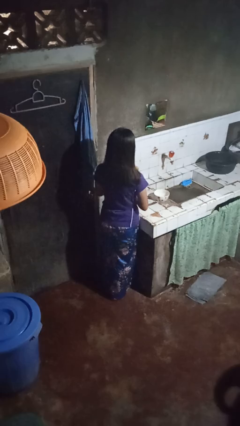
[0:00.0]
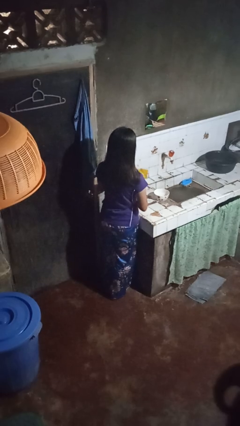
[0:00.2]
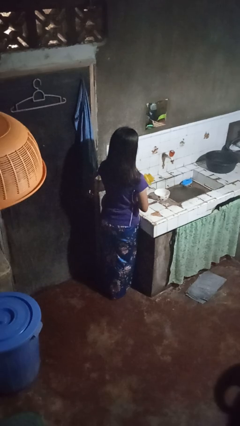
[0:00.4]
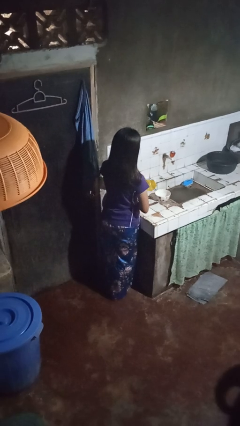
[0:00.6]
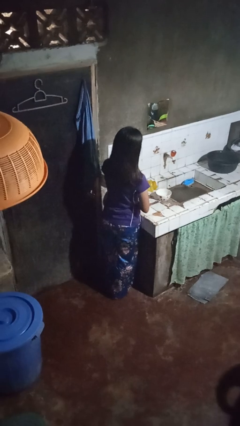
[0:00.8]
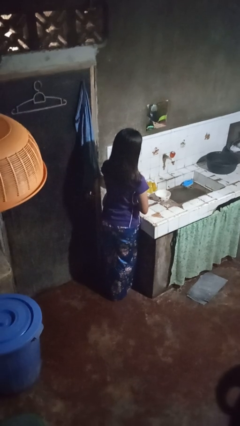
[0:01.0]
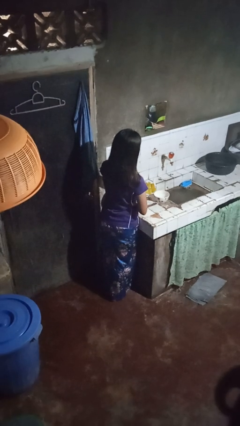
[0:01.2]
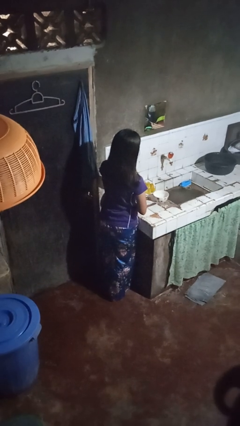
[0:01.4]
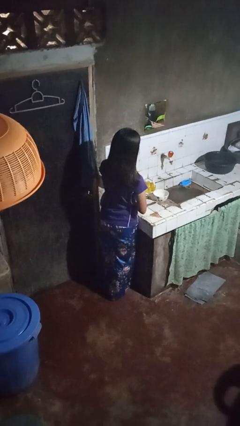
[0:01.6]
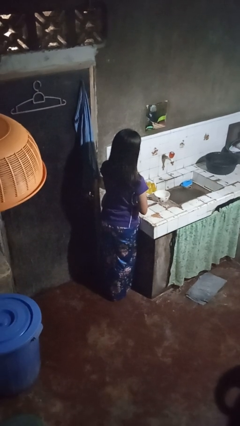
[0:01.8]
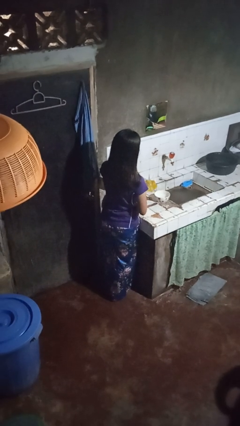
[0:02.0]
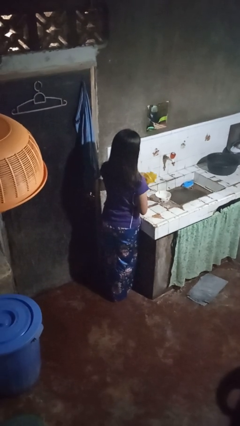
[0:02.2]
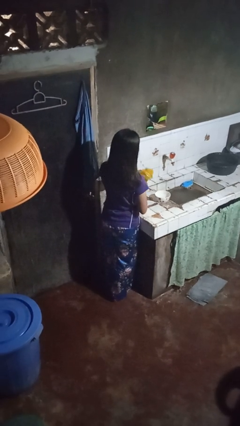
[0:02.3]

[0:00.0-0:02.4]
person pours into bowl

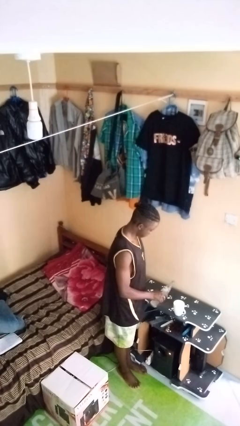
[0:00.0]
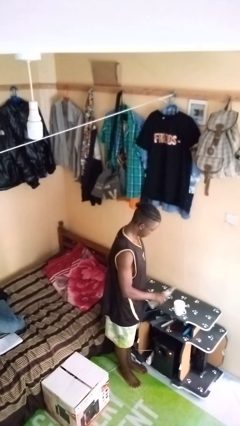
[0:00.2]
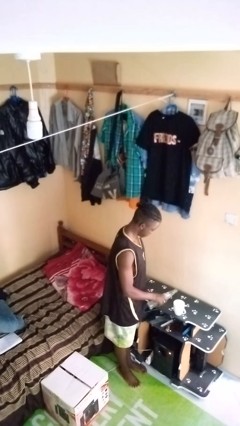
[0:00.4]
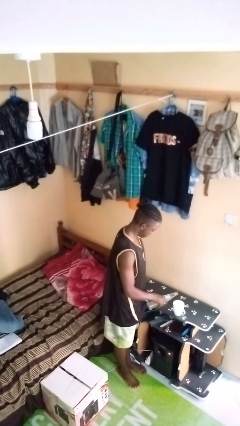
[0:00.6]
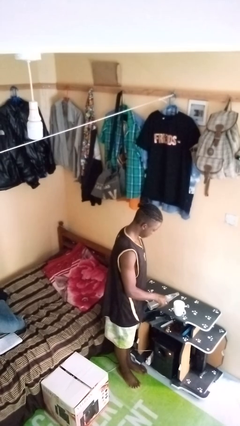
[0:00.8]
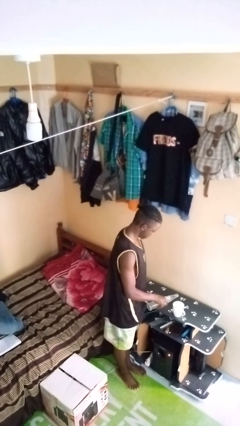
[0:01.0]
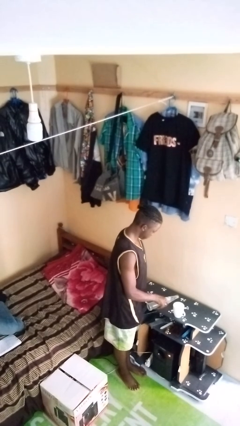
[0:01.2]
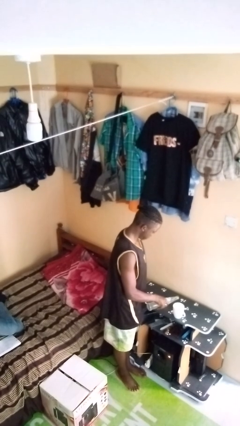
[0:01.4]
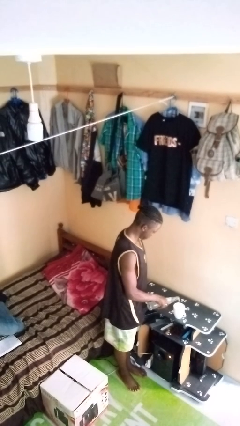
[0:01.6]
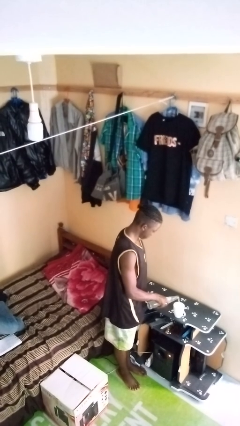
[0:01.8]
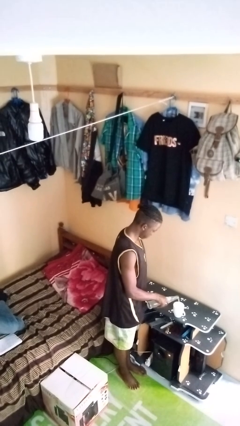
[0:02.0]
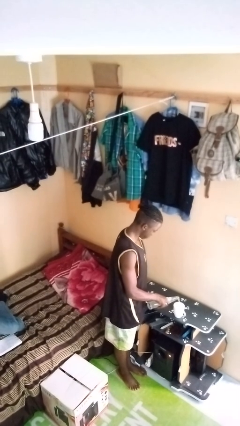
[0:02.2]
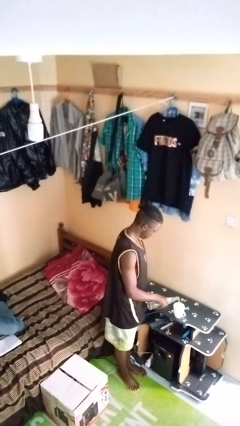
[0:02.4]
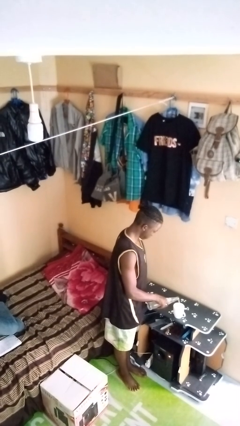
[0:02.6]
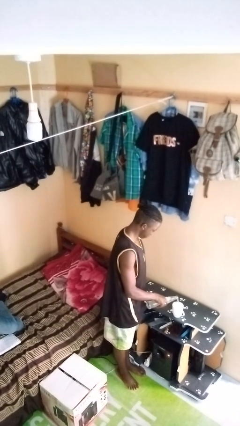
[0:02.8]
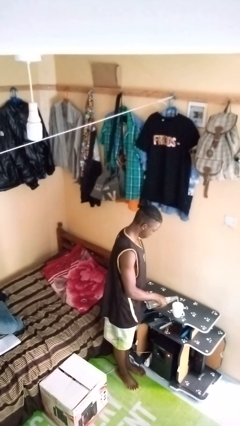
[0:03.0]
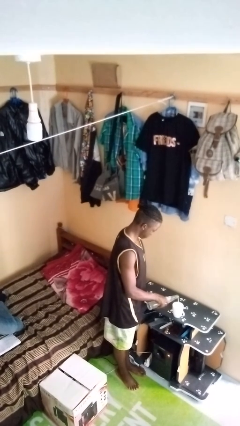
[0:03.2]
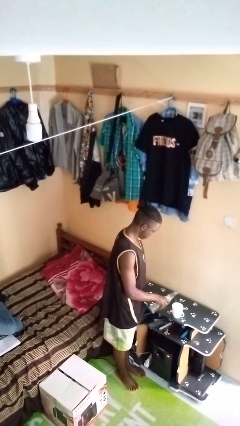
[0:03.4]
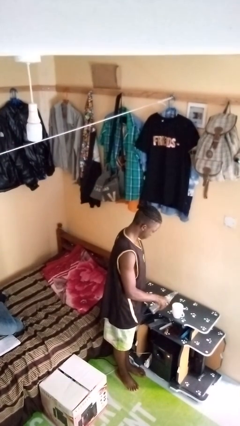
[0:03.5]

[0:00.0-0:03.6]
person pours liquid into cup

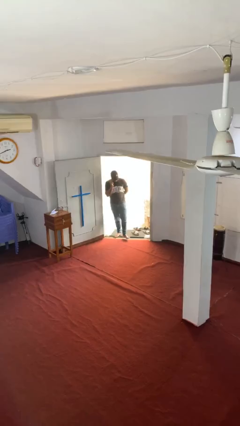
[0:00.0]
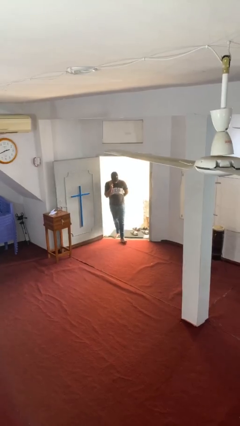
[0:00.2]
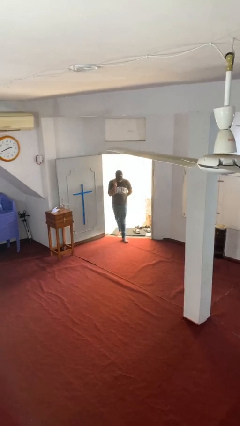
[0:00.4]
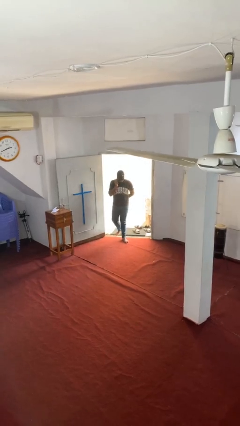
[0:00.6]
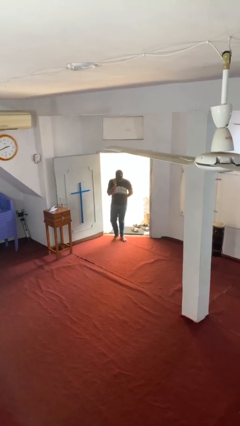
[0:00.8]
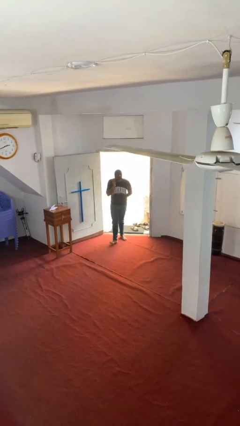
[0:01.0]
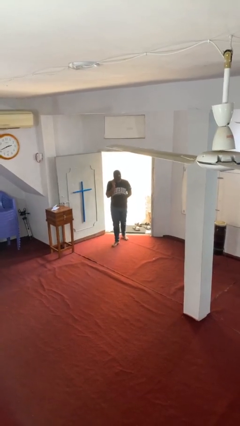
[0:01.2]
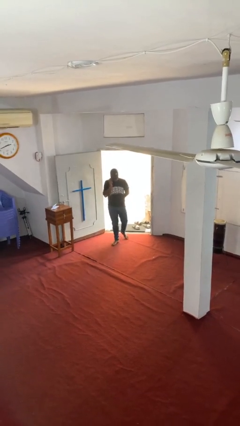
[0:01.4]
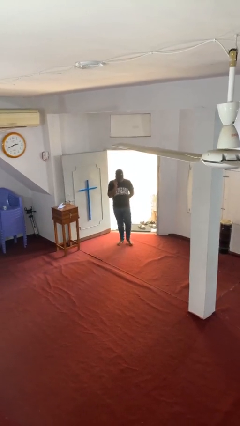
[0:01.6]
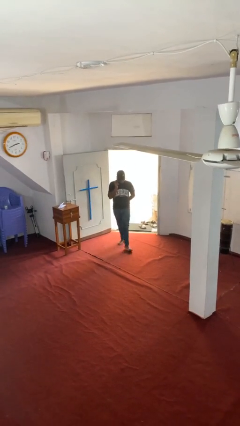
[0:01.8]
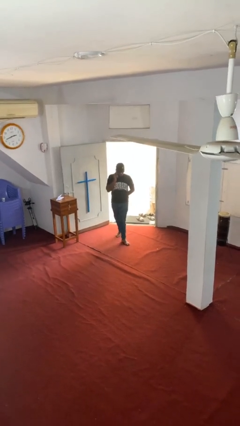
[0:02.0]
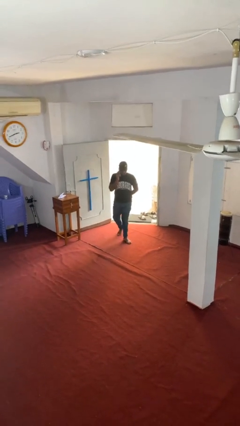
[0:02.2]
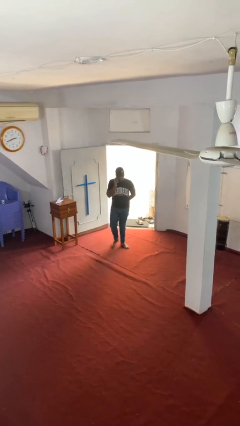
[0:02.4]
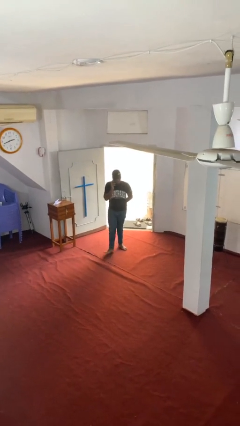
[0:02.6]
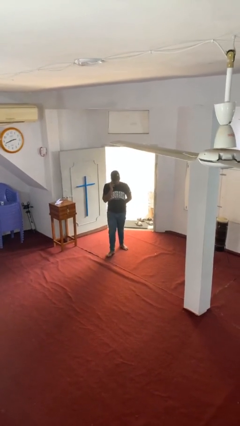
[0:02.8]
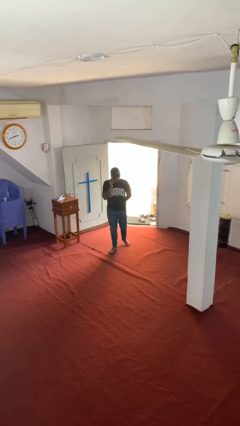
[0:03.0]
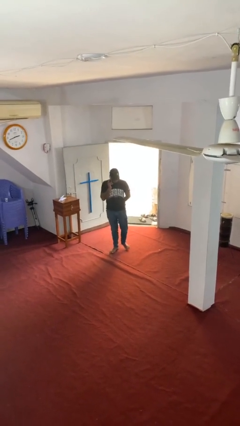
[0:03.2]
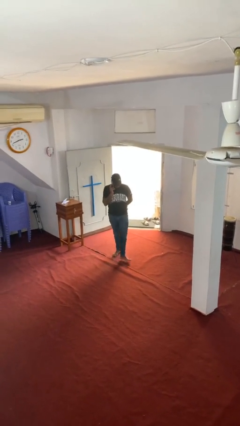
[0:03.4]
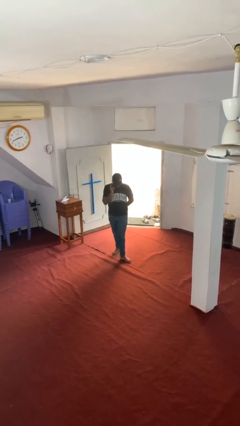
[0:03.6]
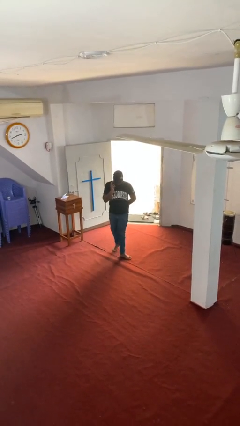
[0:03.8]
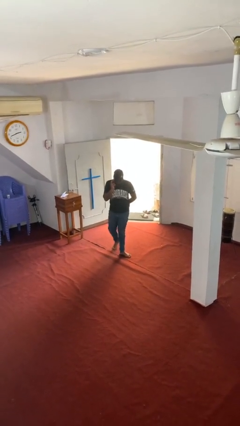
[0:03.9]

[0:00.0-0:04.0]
person enters scene through structure

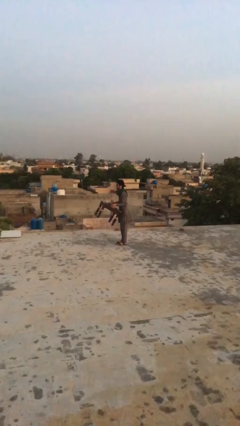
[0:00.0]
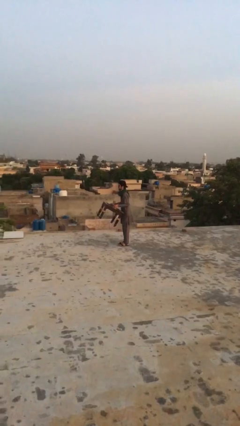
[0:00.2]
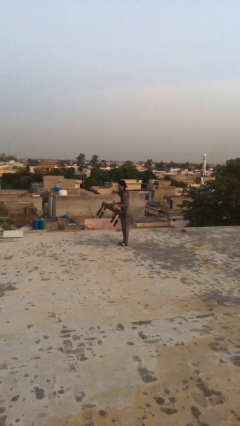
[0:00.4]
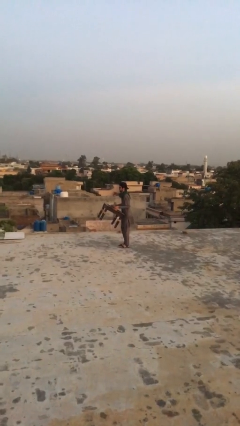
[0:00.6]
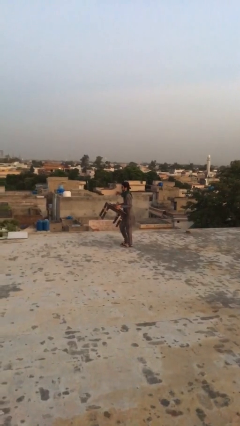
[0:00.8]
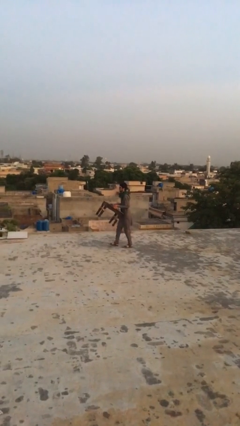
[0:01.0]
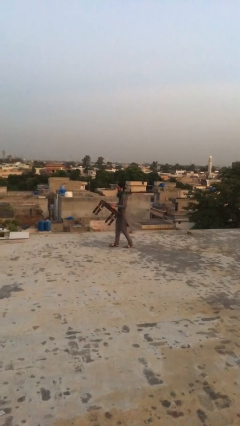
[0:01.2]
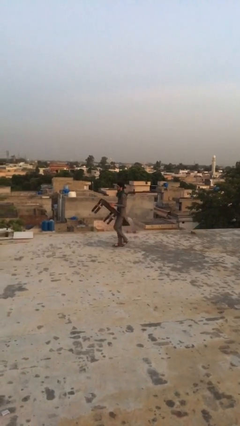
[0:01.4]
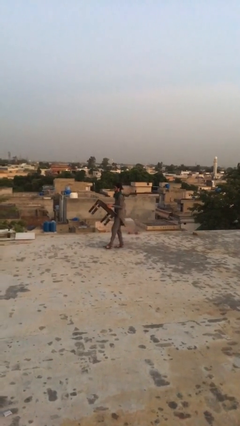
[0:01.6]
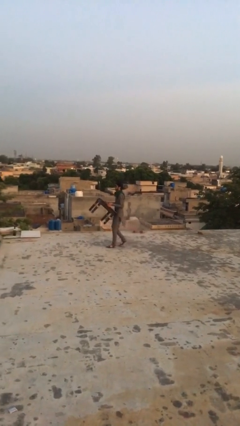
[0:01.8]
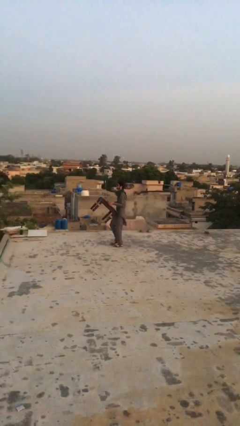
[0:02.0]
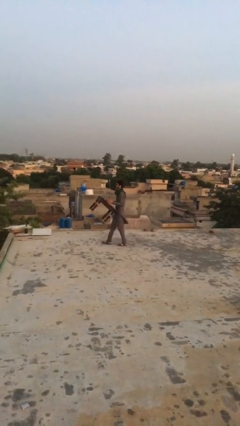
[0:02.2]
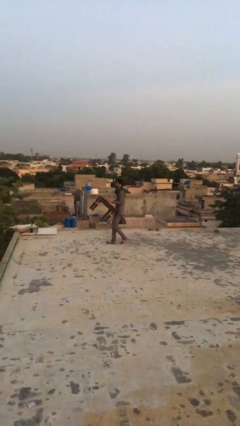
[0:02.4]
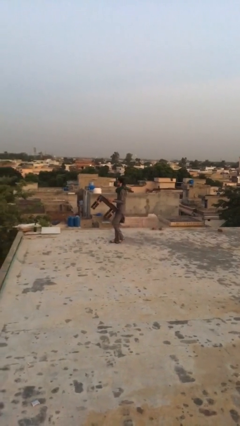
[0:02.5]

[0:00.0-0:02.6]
person carries heavy object

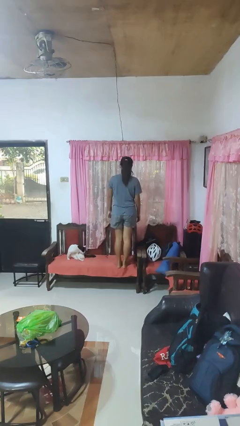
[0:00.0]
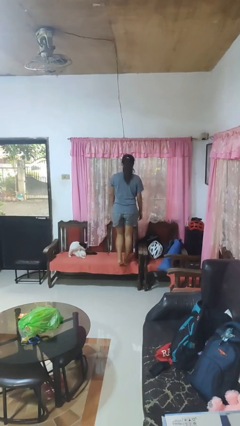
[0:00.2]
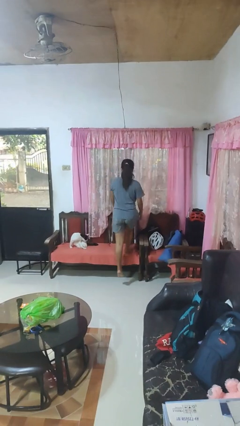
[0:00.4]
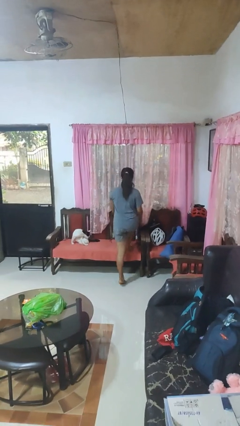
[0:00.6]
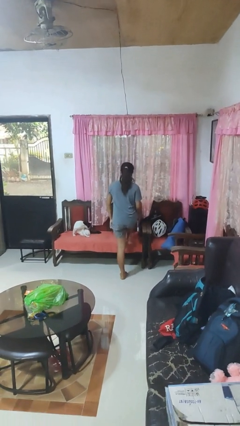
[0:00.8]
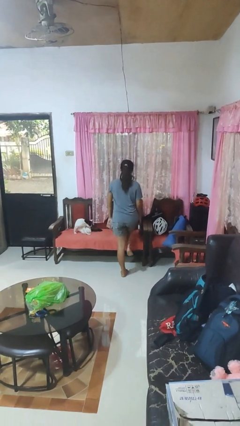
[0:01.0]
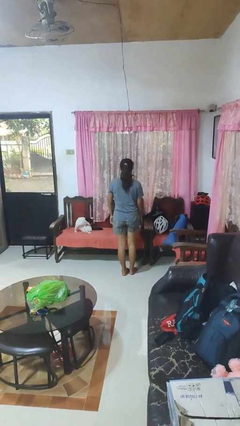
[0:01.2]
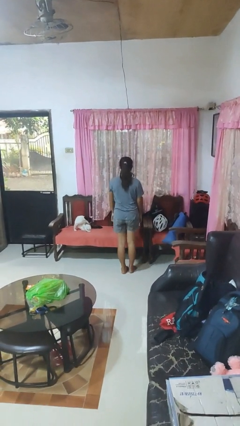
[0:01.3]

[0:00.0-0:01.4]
person climbs off chair

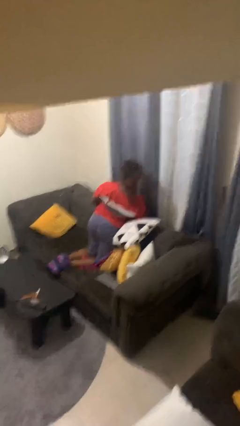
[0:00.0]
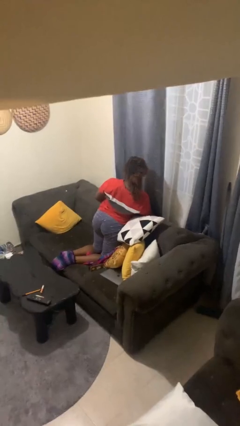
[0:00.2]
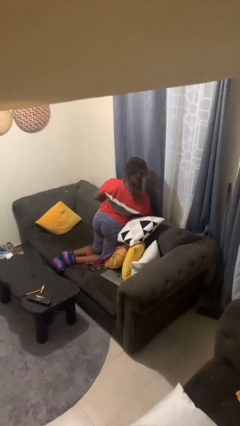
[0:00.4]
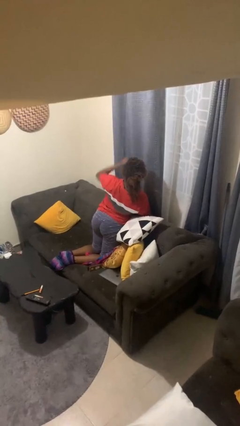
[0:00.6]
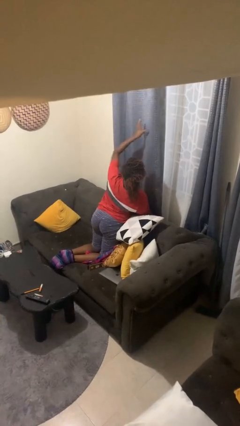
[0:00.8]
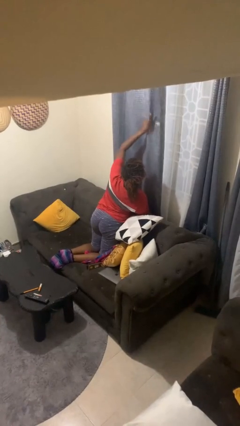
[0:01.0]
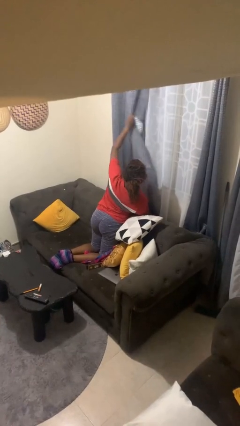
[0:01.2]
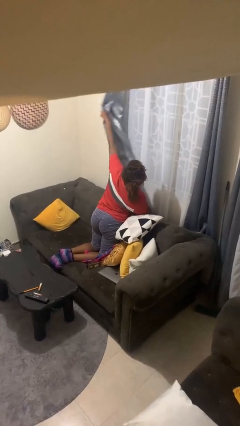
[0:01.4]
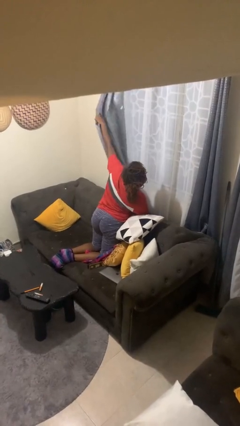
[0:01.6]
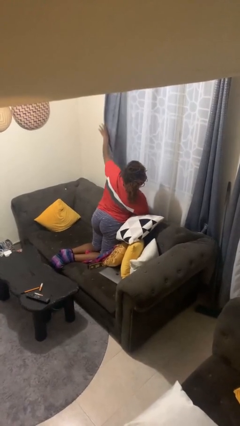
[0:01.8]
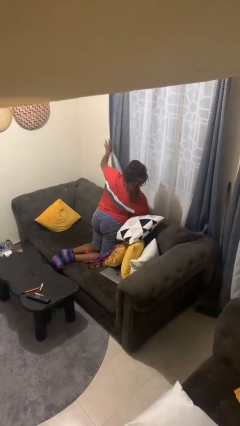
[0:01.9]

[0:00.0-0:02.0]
person opens curtains

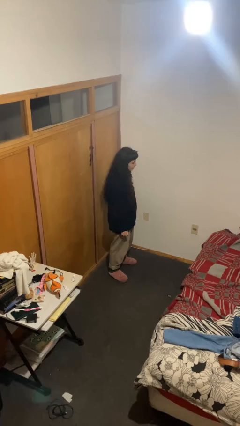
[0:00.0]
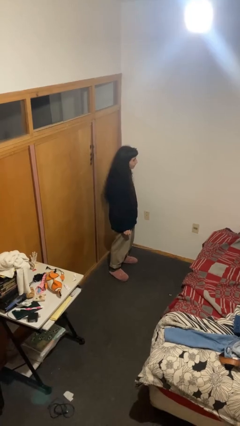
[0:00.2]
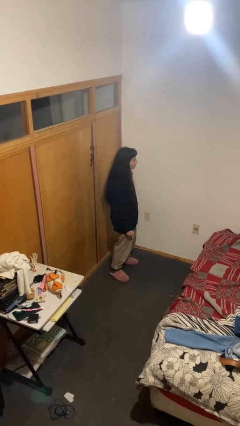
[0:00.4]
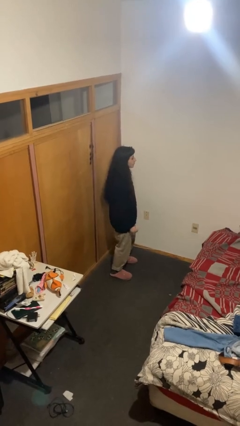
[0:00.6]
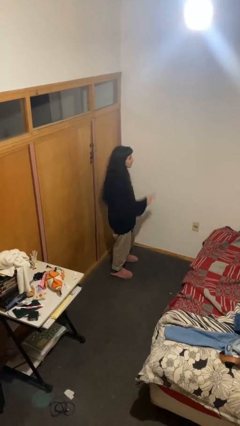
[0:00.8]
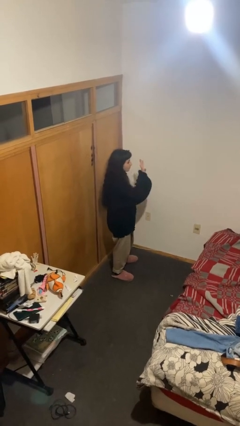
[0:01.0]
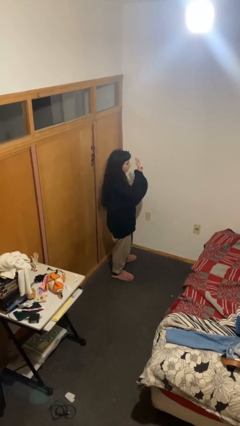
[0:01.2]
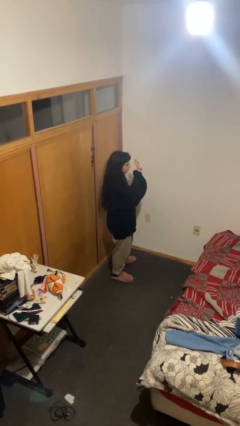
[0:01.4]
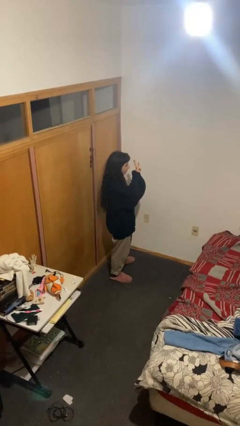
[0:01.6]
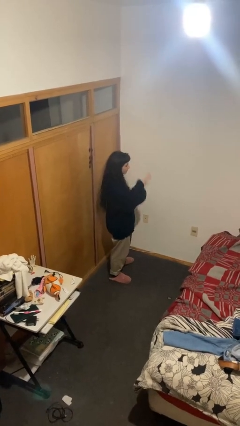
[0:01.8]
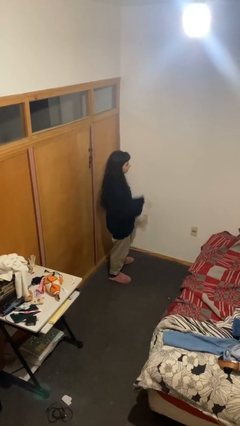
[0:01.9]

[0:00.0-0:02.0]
person gestures number four
